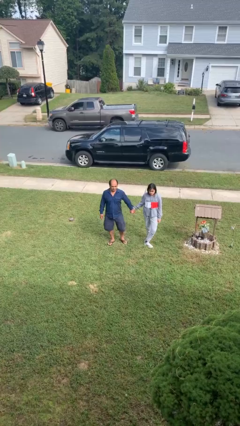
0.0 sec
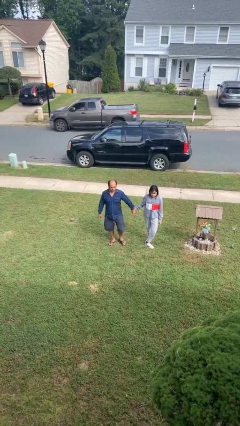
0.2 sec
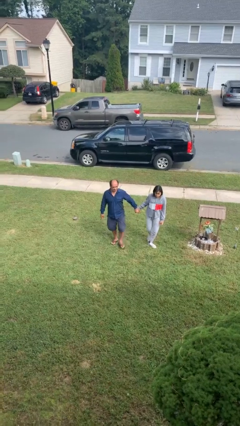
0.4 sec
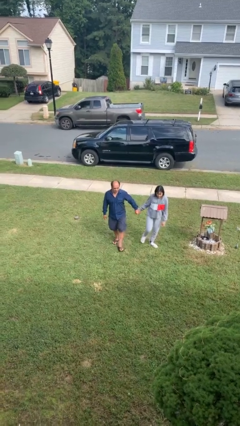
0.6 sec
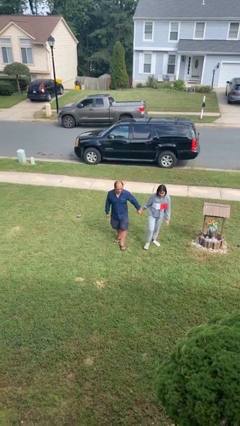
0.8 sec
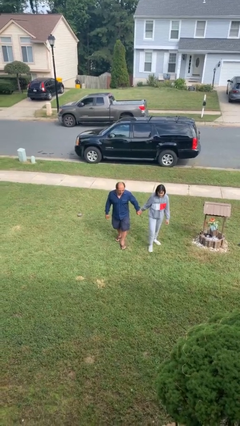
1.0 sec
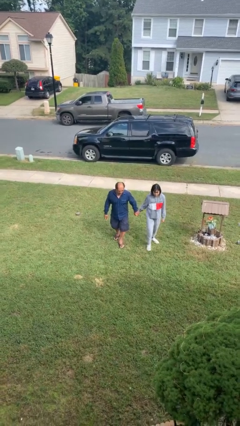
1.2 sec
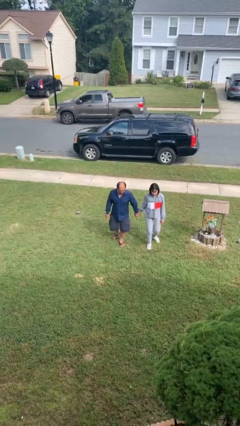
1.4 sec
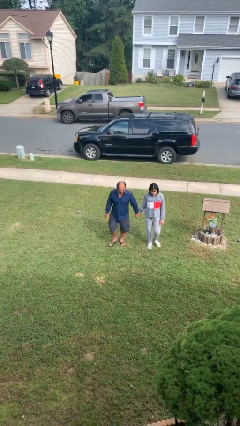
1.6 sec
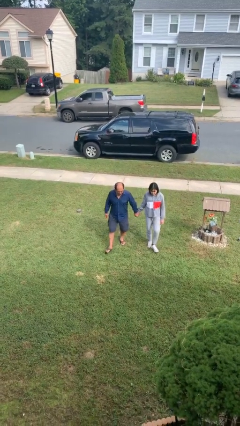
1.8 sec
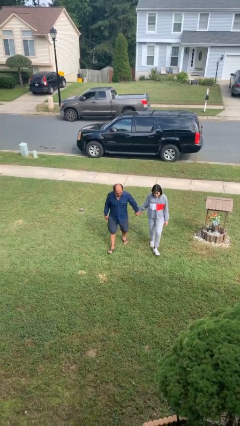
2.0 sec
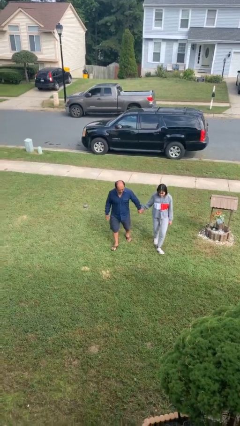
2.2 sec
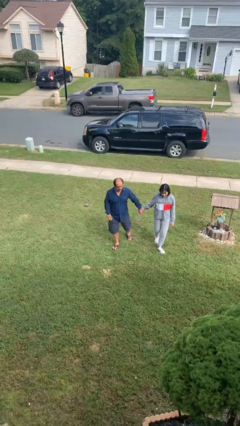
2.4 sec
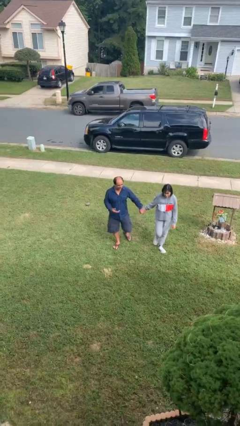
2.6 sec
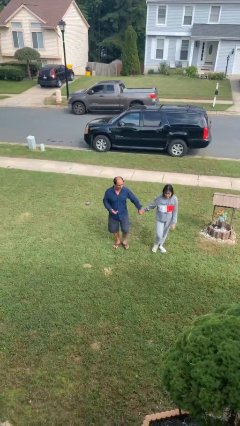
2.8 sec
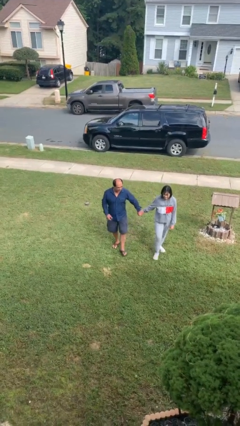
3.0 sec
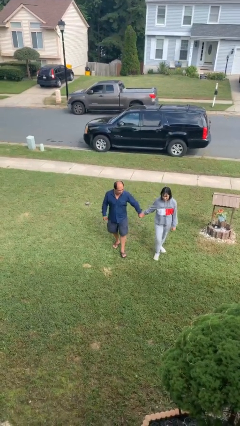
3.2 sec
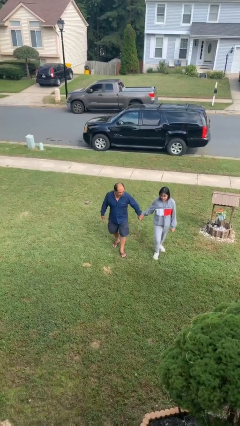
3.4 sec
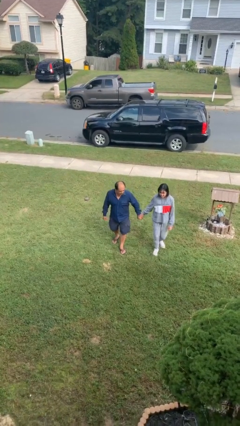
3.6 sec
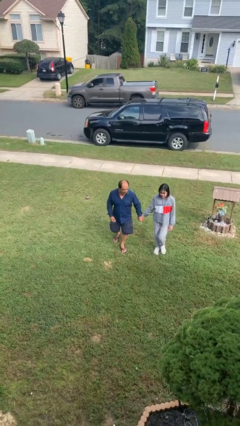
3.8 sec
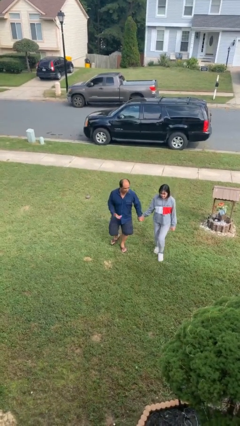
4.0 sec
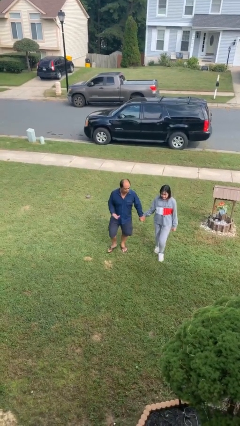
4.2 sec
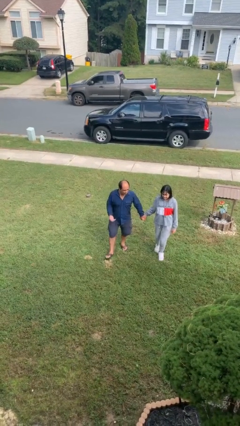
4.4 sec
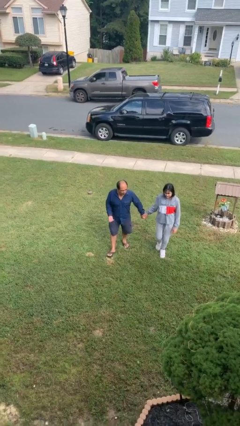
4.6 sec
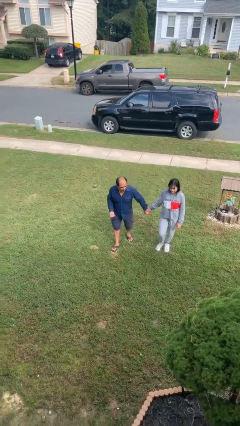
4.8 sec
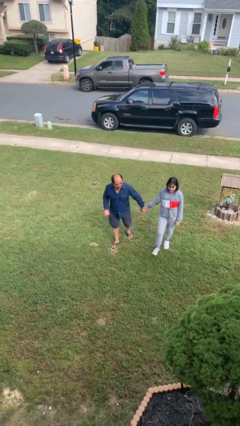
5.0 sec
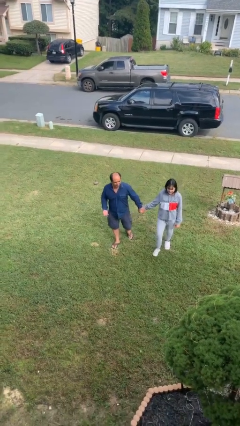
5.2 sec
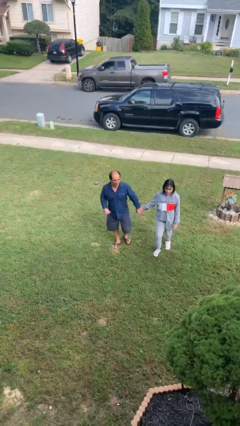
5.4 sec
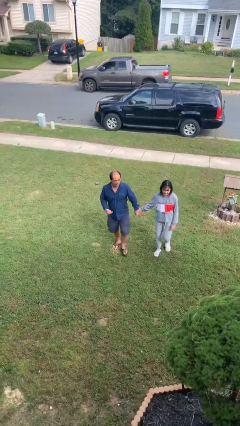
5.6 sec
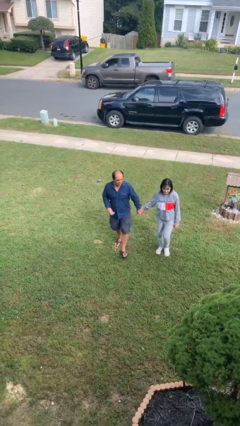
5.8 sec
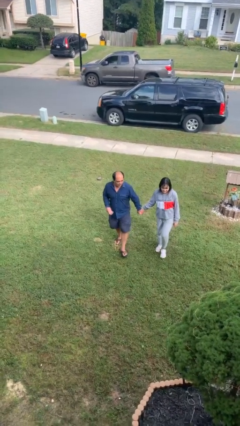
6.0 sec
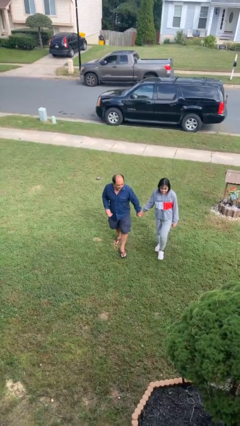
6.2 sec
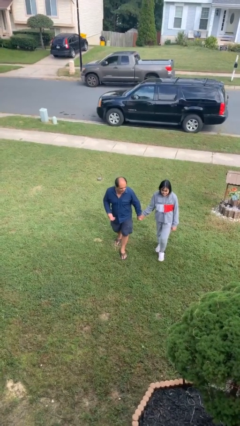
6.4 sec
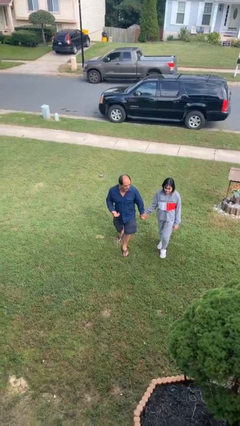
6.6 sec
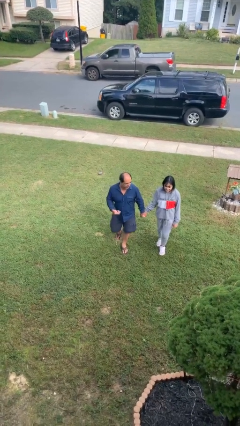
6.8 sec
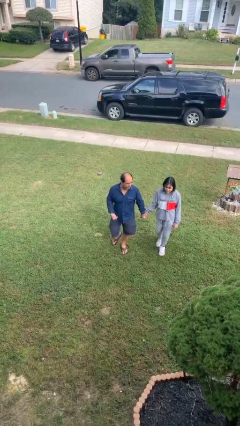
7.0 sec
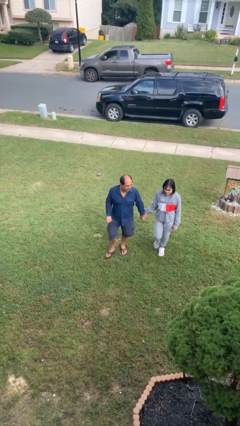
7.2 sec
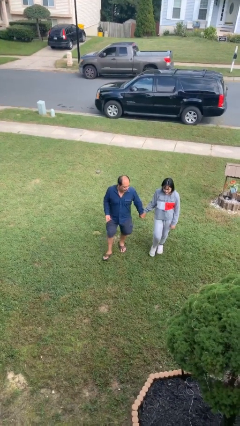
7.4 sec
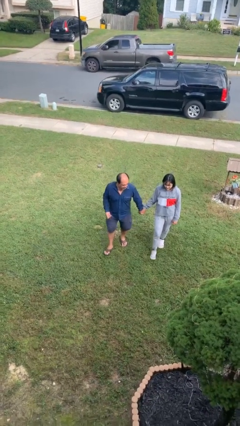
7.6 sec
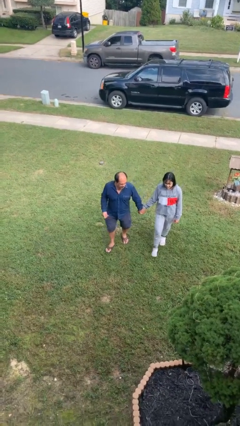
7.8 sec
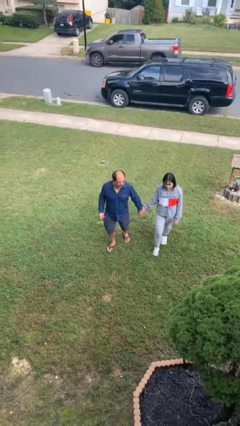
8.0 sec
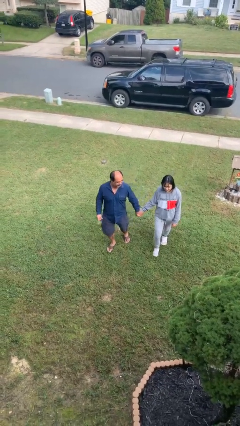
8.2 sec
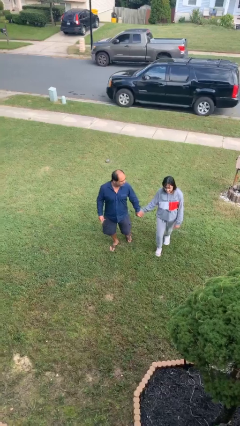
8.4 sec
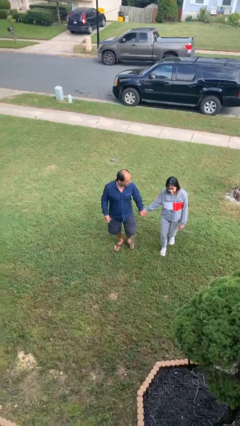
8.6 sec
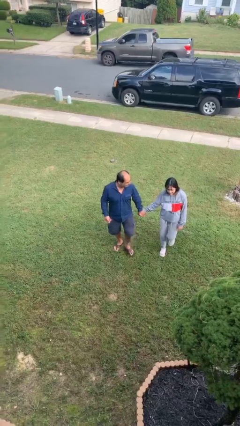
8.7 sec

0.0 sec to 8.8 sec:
person holds hand

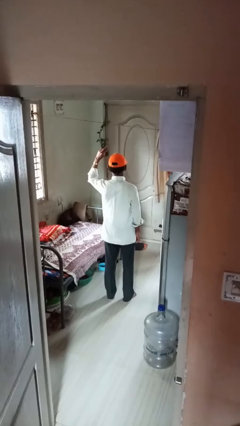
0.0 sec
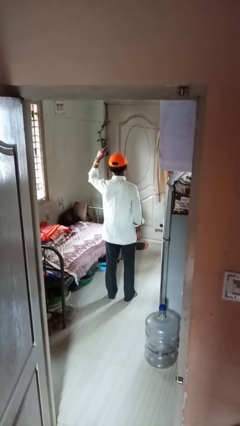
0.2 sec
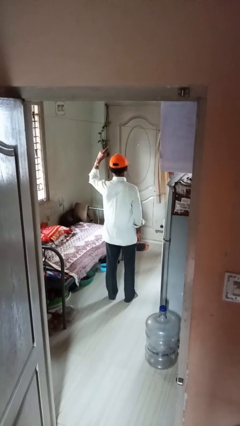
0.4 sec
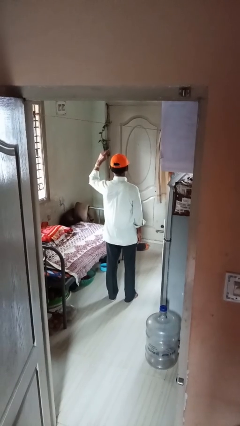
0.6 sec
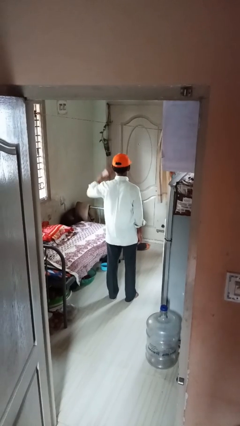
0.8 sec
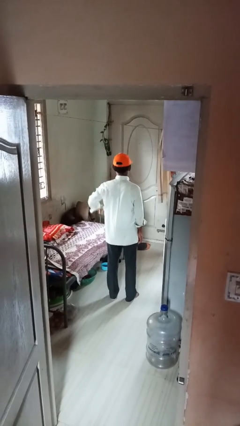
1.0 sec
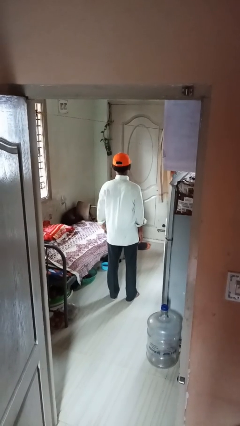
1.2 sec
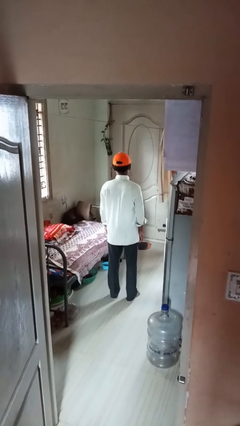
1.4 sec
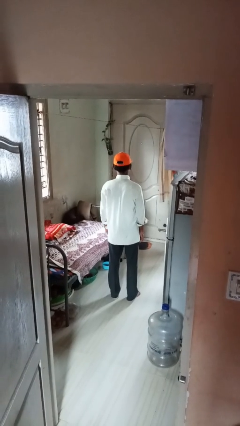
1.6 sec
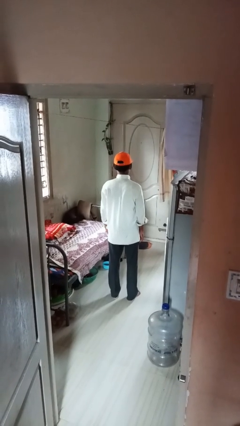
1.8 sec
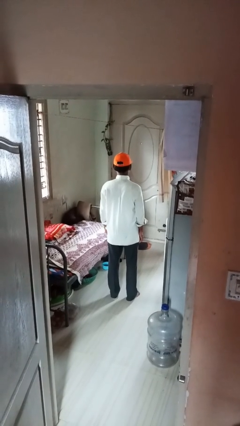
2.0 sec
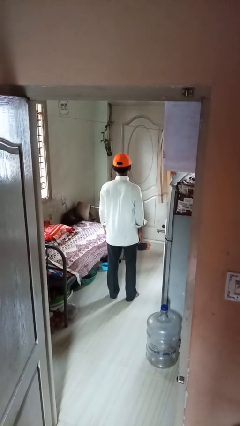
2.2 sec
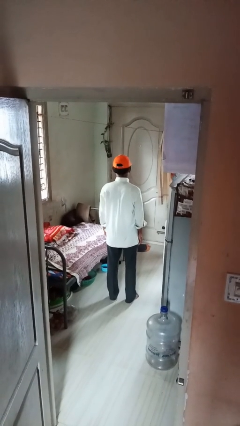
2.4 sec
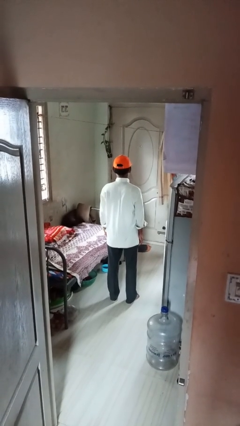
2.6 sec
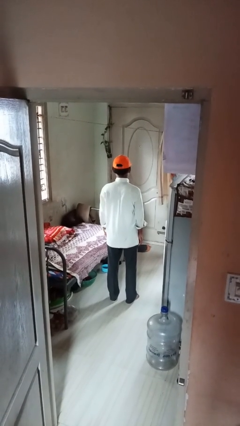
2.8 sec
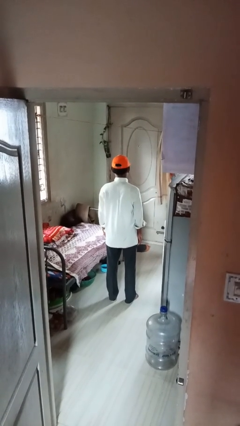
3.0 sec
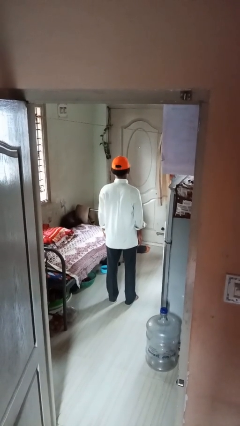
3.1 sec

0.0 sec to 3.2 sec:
person gestures swipe down

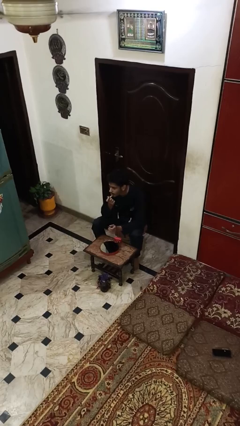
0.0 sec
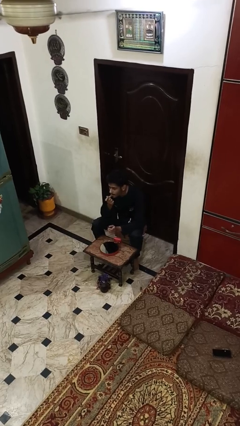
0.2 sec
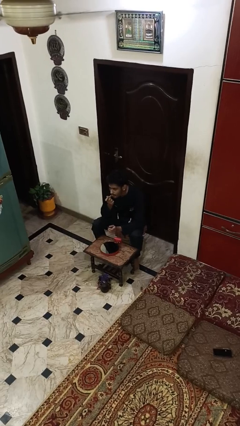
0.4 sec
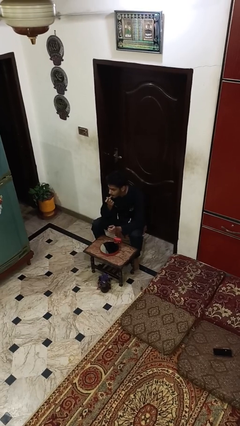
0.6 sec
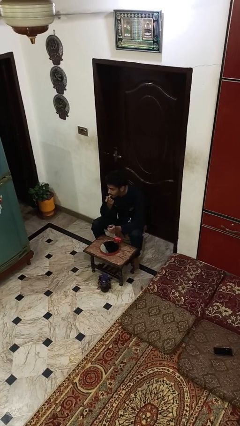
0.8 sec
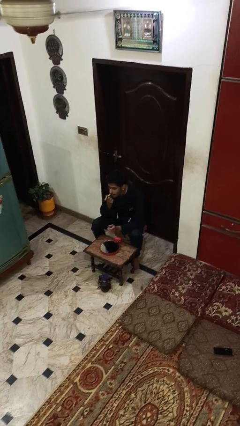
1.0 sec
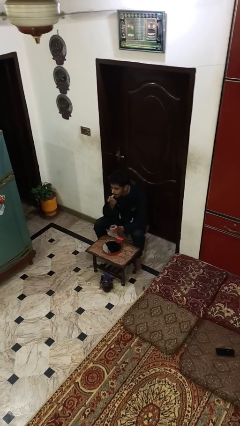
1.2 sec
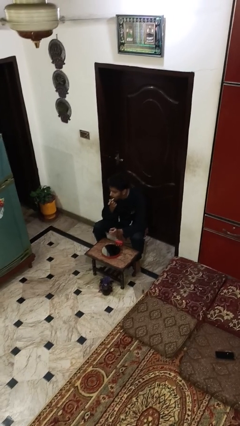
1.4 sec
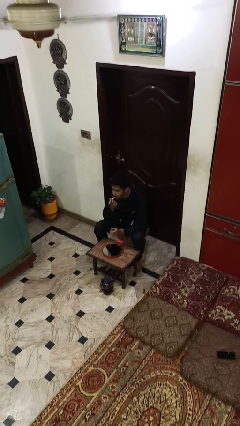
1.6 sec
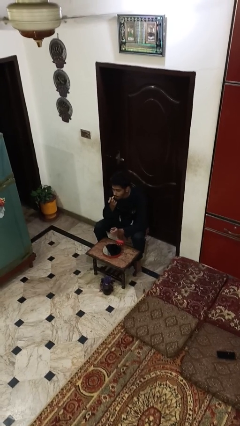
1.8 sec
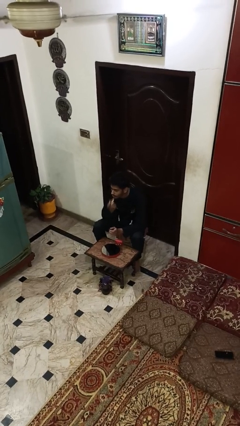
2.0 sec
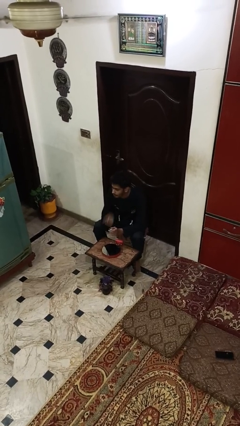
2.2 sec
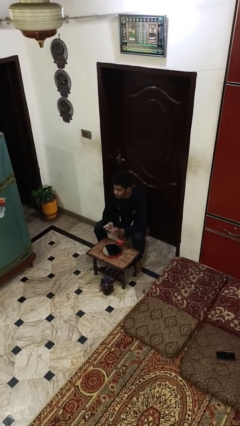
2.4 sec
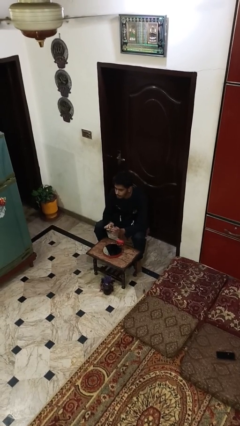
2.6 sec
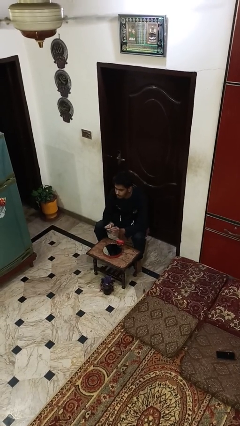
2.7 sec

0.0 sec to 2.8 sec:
person applies lip makeup

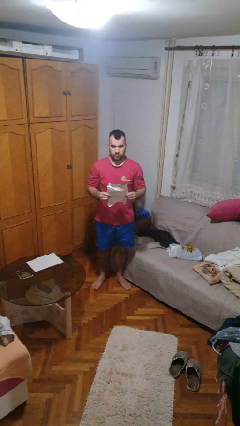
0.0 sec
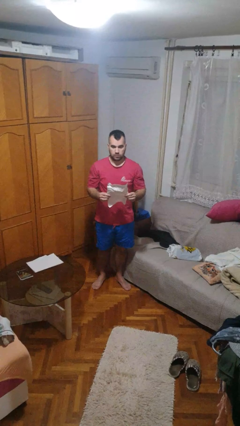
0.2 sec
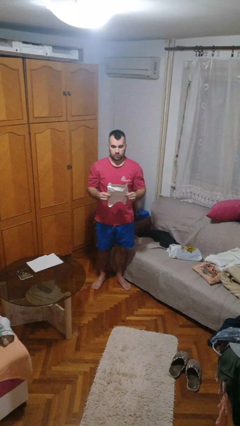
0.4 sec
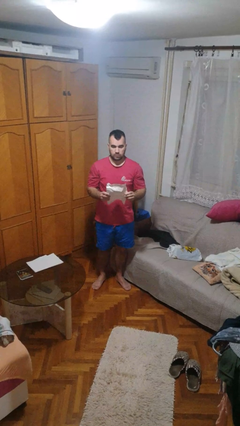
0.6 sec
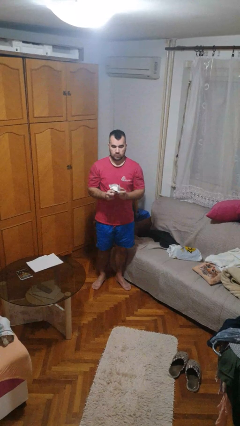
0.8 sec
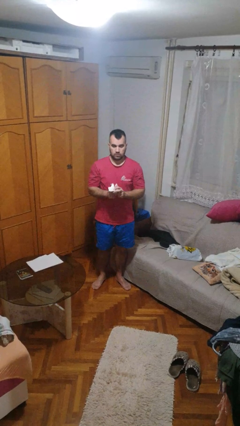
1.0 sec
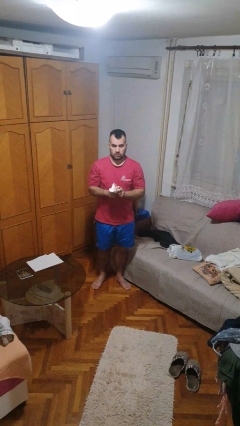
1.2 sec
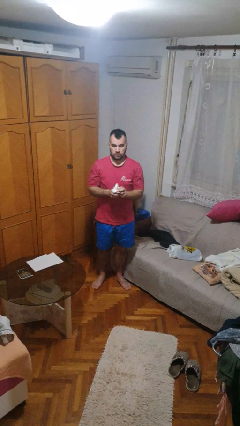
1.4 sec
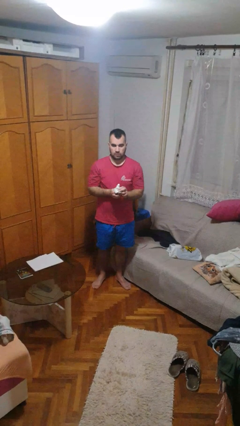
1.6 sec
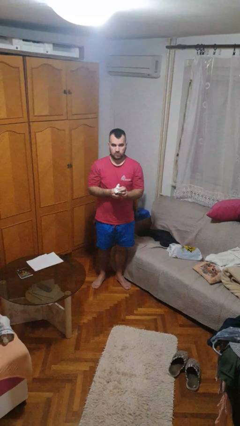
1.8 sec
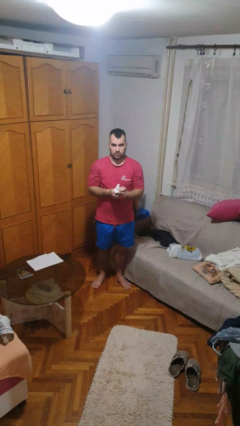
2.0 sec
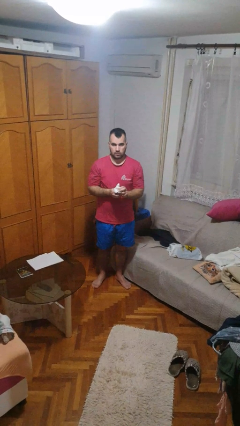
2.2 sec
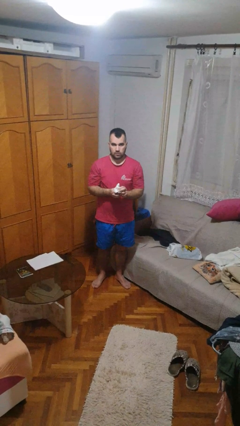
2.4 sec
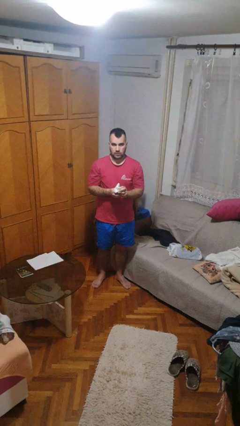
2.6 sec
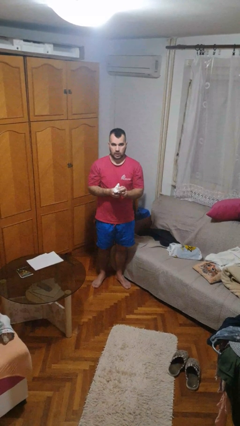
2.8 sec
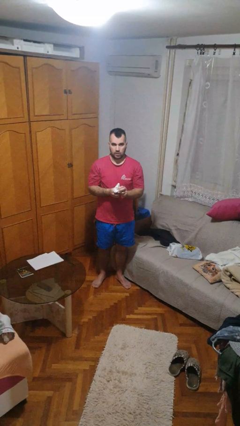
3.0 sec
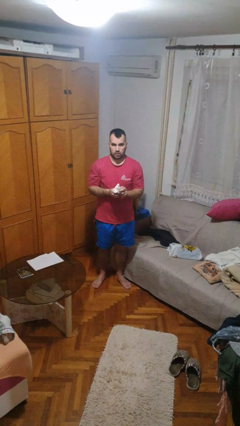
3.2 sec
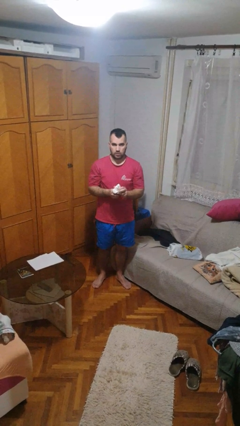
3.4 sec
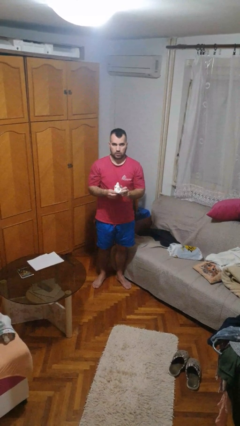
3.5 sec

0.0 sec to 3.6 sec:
person crumples paper
